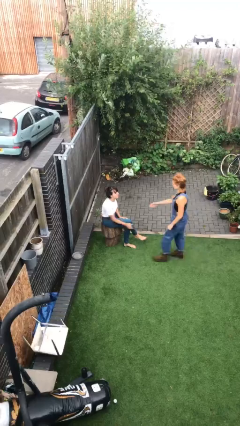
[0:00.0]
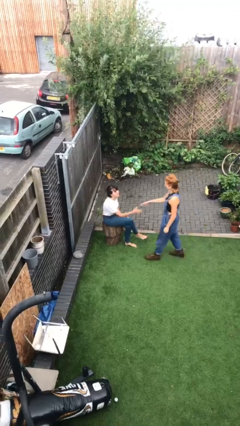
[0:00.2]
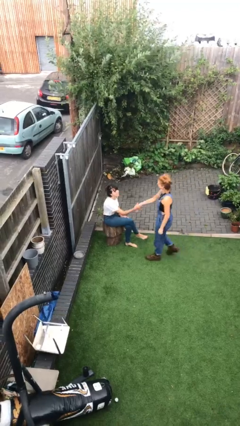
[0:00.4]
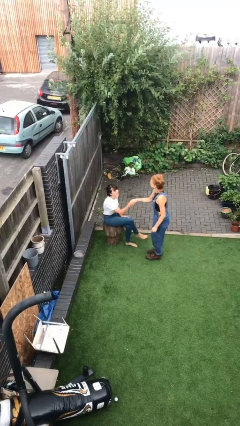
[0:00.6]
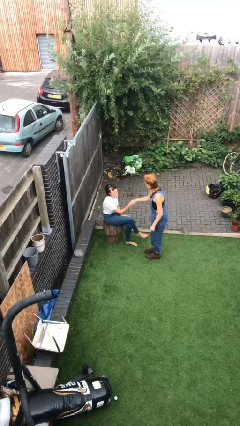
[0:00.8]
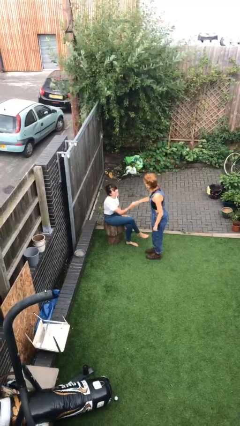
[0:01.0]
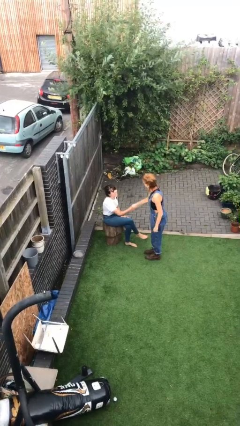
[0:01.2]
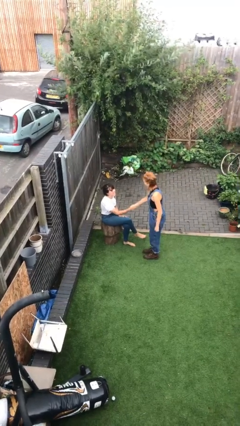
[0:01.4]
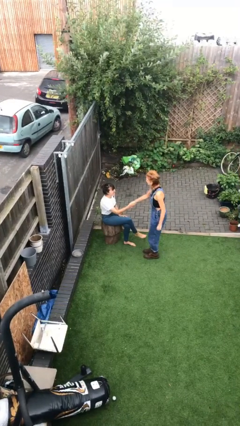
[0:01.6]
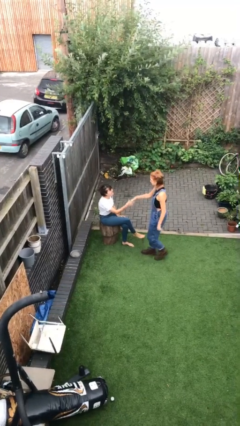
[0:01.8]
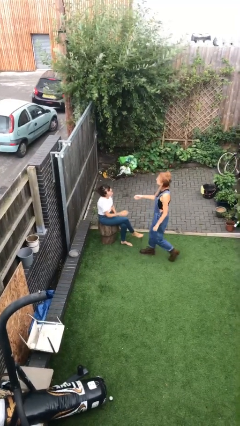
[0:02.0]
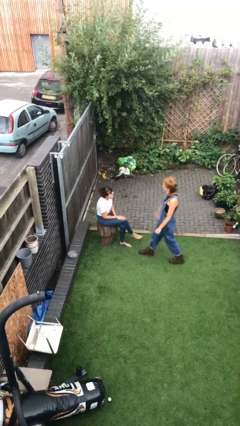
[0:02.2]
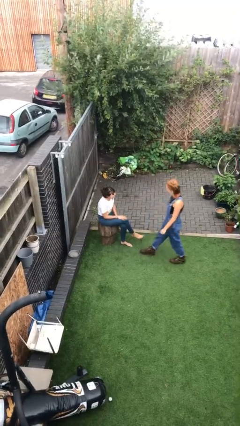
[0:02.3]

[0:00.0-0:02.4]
person shakes hand

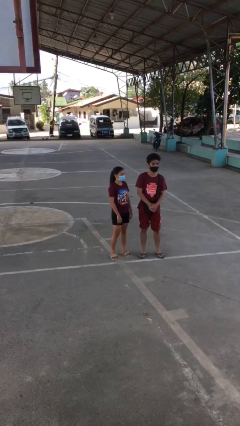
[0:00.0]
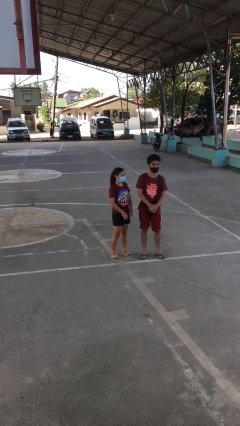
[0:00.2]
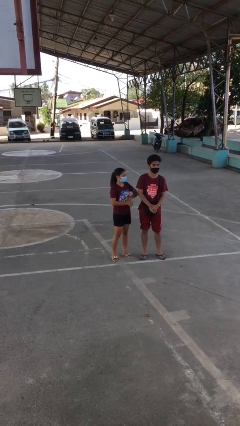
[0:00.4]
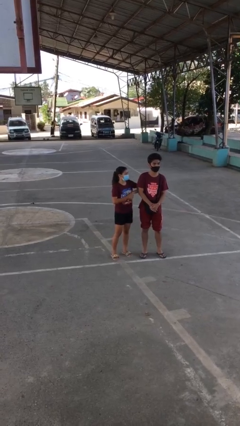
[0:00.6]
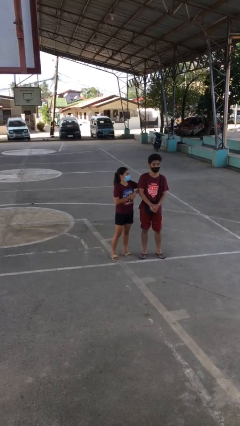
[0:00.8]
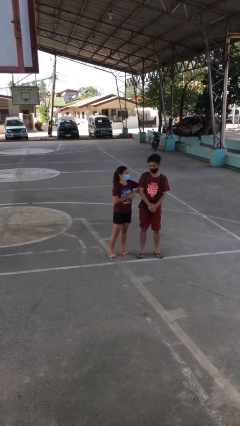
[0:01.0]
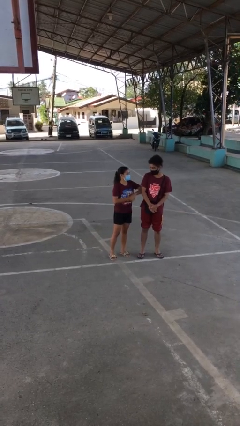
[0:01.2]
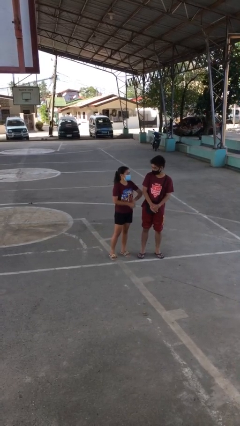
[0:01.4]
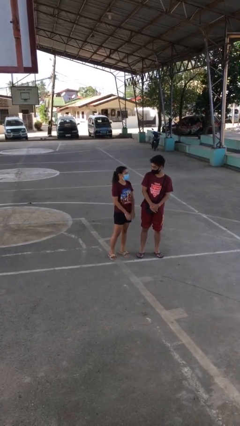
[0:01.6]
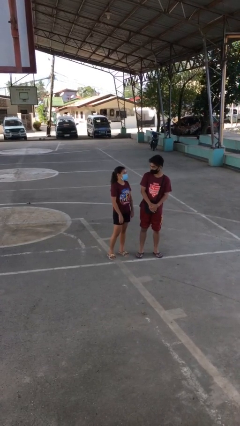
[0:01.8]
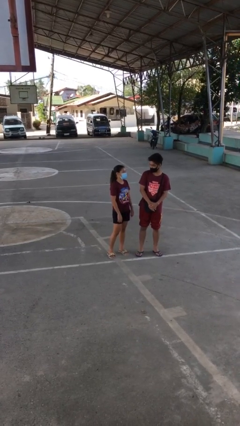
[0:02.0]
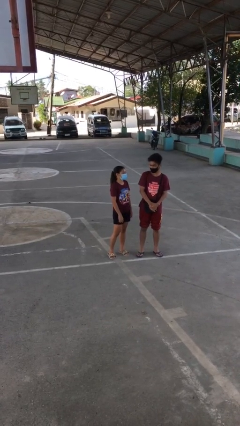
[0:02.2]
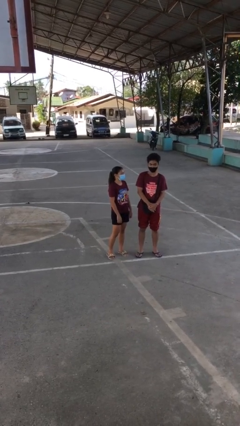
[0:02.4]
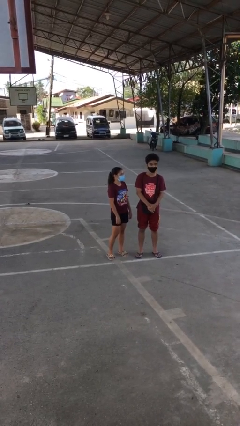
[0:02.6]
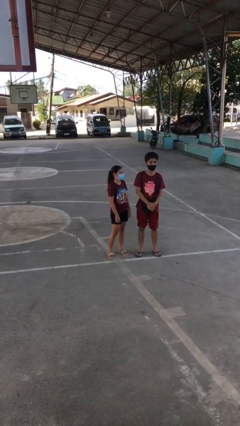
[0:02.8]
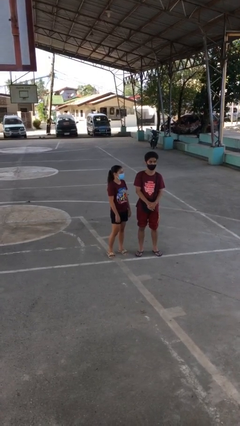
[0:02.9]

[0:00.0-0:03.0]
person nudges person with elbow

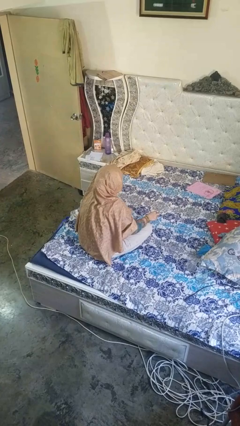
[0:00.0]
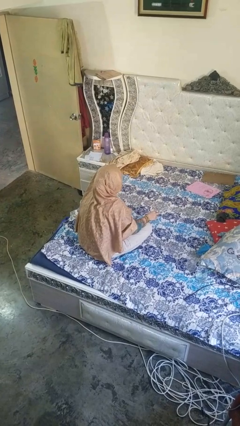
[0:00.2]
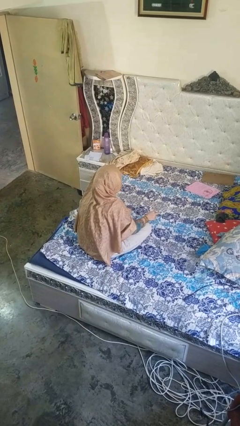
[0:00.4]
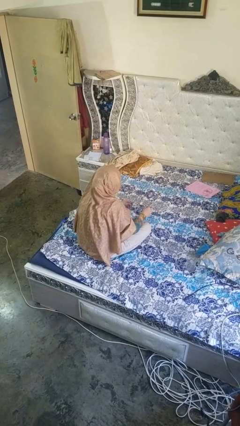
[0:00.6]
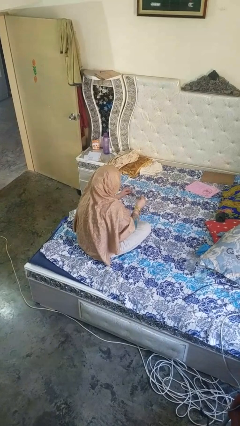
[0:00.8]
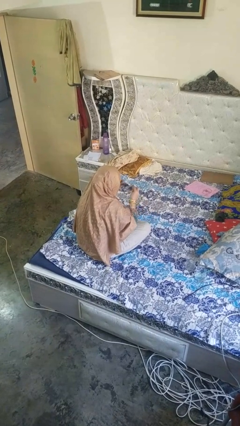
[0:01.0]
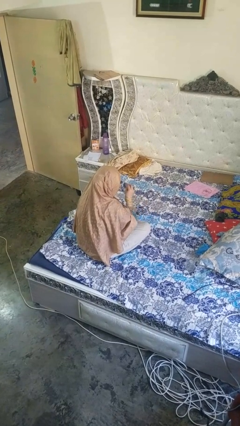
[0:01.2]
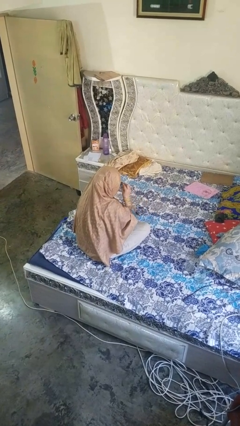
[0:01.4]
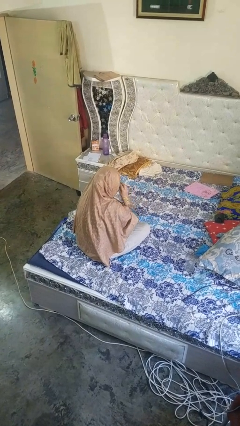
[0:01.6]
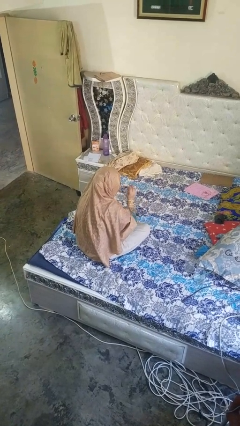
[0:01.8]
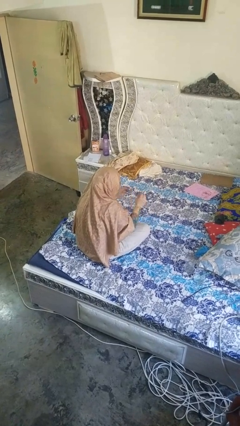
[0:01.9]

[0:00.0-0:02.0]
person puts on glasses

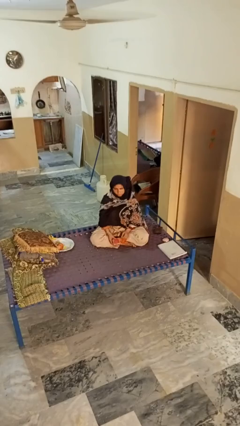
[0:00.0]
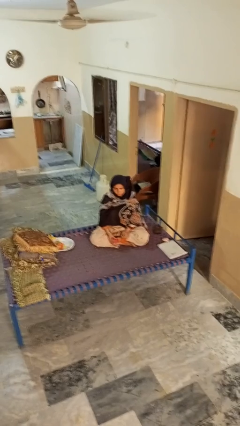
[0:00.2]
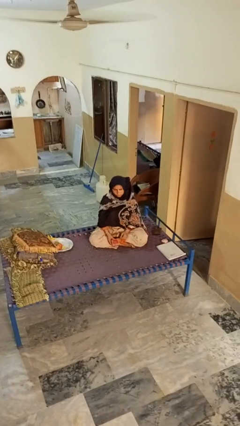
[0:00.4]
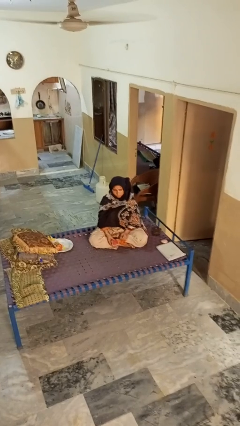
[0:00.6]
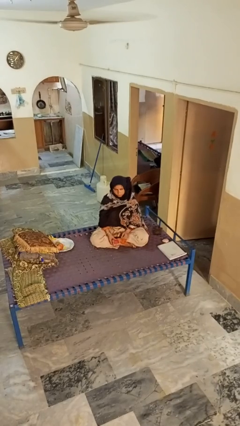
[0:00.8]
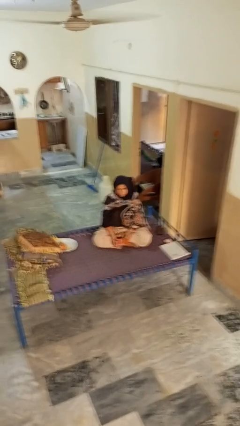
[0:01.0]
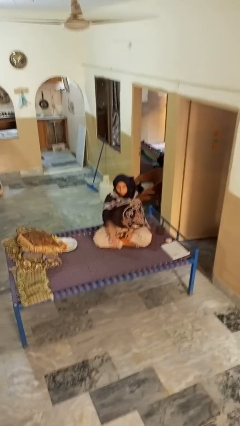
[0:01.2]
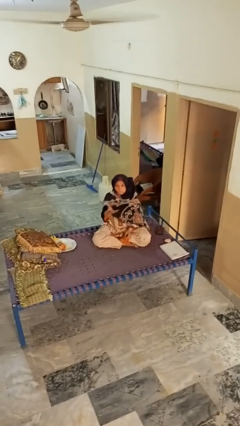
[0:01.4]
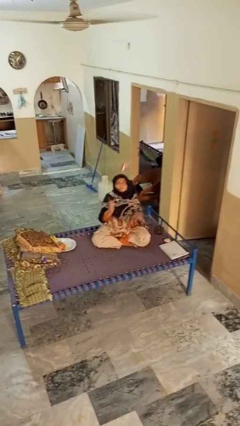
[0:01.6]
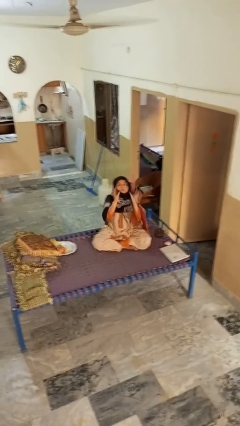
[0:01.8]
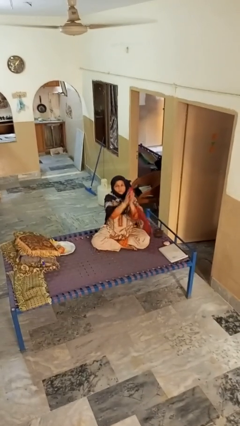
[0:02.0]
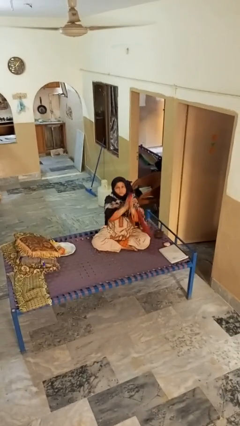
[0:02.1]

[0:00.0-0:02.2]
person drops object

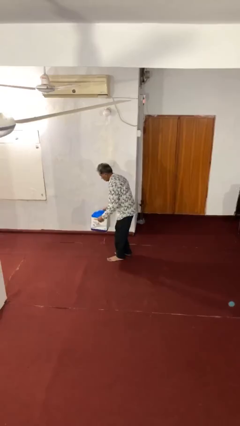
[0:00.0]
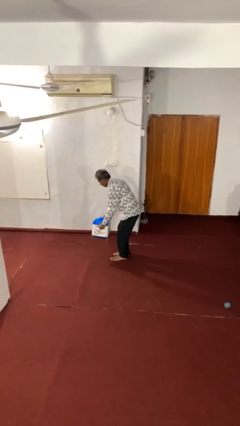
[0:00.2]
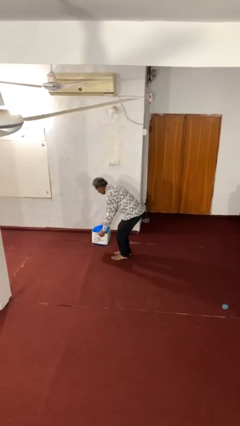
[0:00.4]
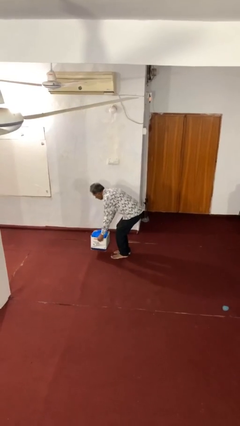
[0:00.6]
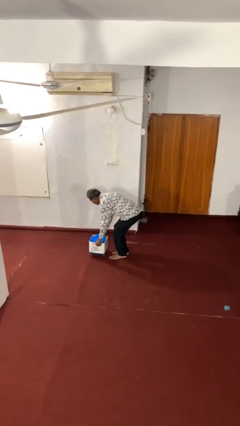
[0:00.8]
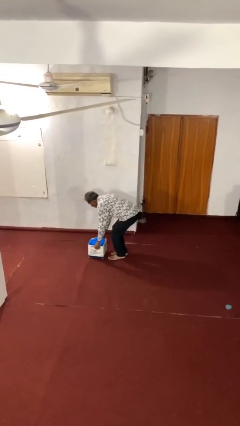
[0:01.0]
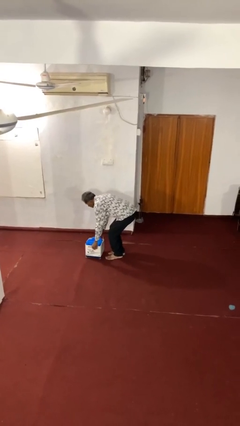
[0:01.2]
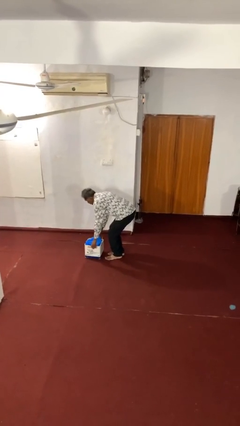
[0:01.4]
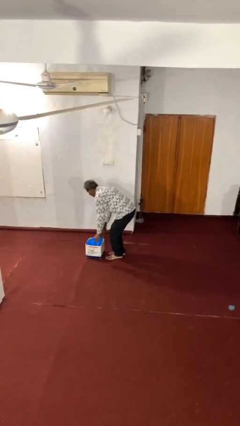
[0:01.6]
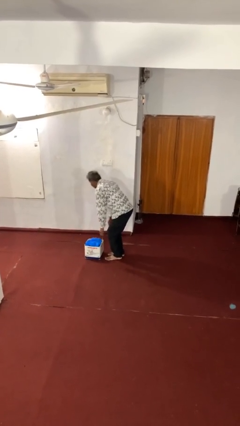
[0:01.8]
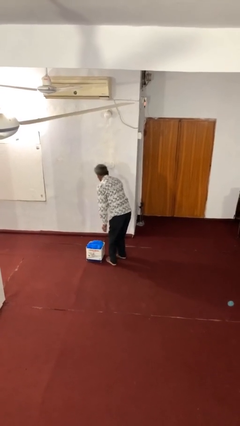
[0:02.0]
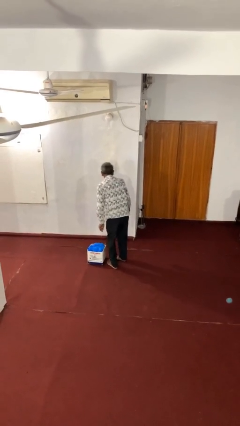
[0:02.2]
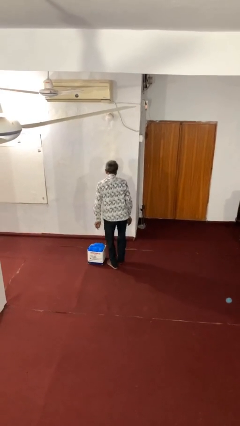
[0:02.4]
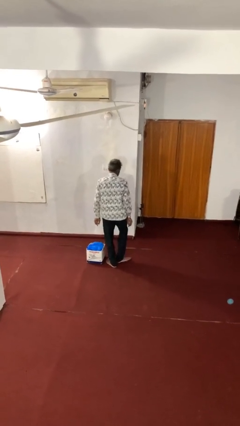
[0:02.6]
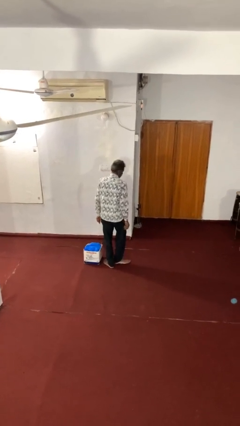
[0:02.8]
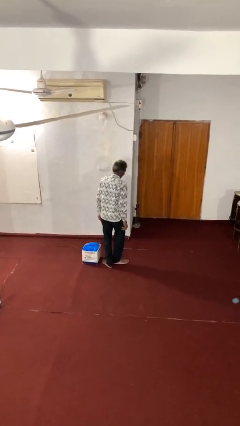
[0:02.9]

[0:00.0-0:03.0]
person puts down object on floor

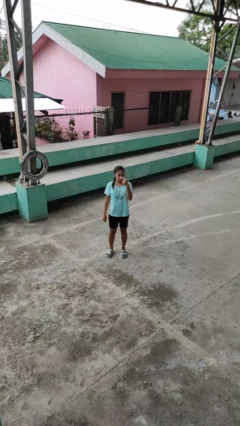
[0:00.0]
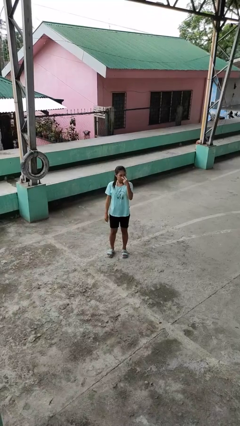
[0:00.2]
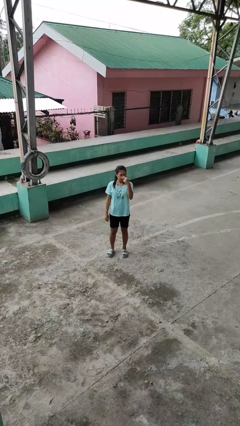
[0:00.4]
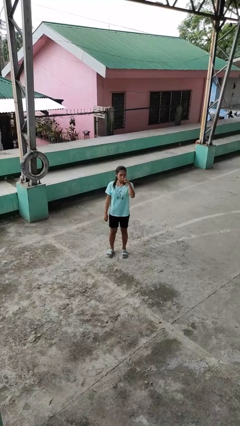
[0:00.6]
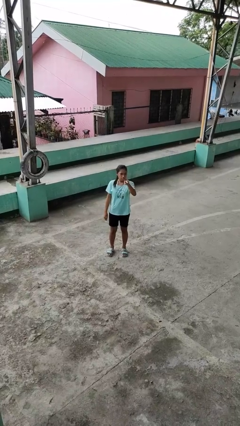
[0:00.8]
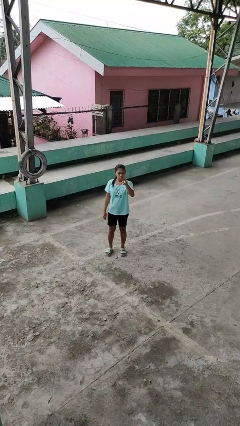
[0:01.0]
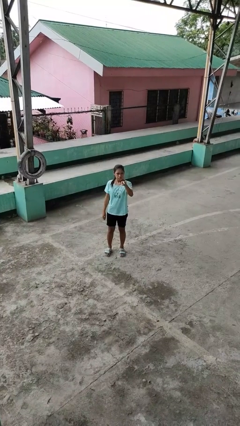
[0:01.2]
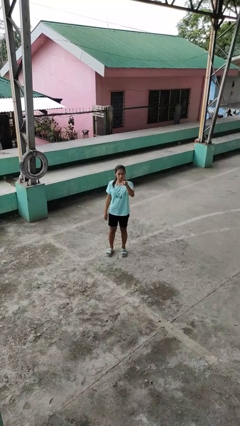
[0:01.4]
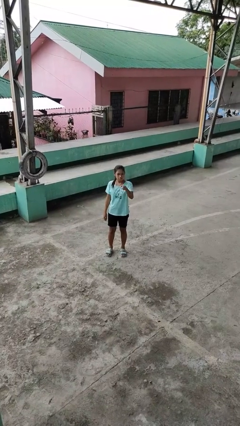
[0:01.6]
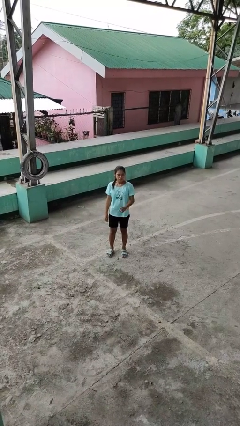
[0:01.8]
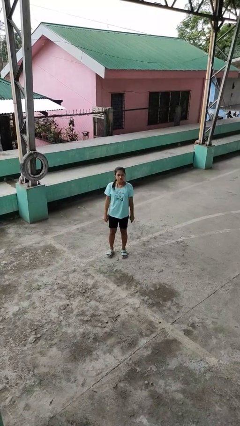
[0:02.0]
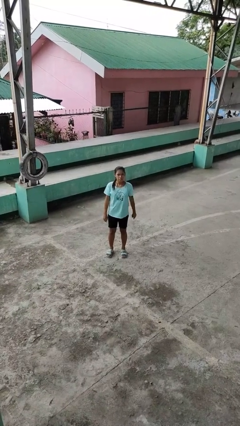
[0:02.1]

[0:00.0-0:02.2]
person gestures watch closely

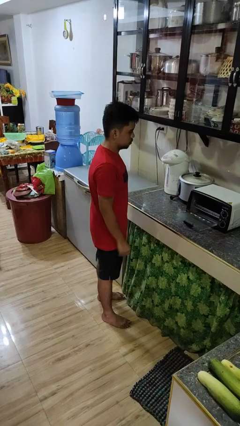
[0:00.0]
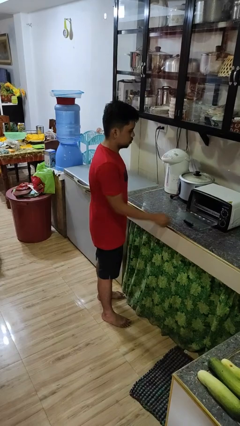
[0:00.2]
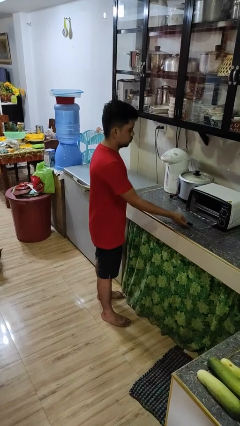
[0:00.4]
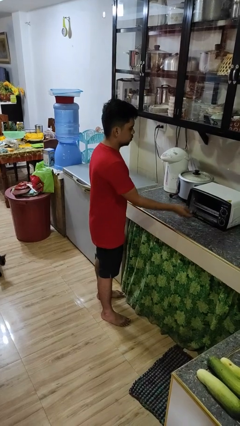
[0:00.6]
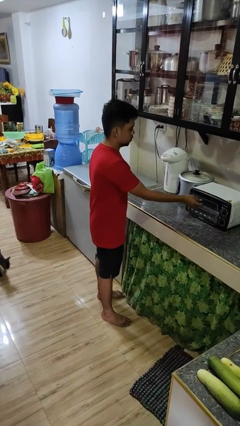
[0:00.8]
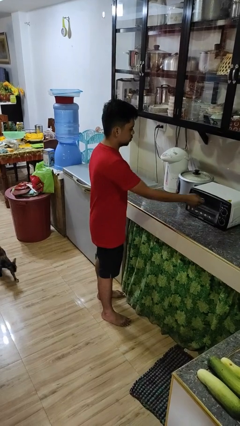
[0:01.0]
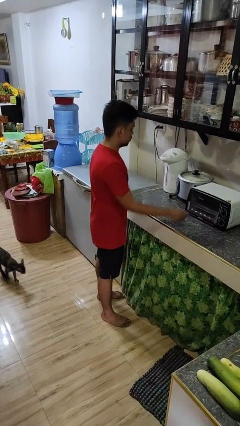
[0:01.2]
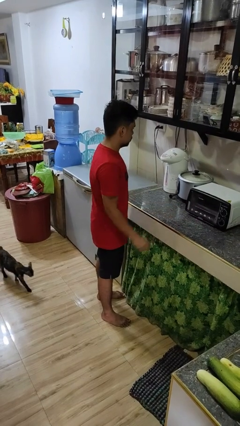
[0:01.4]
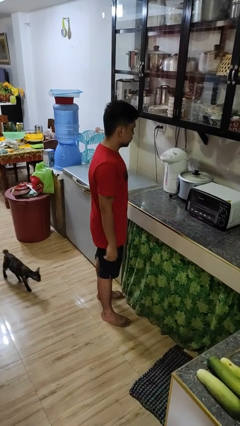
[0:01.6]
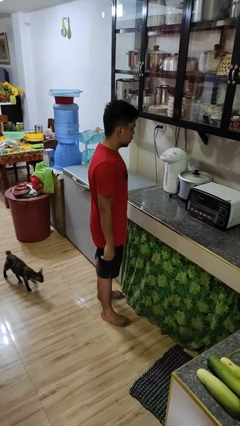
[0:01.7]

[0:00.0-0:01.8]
person closes microwave

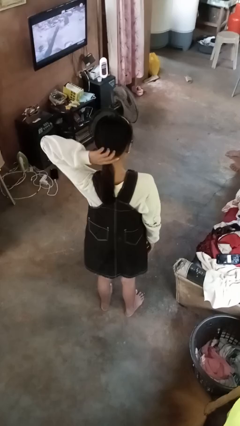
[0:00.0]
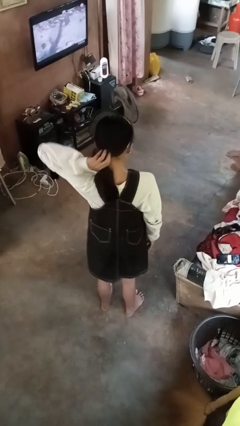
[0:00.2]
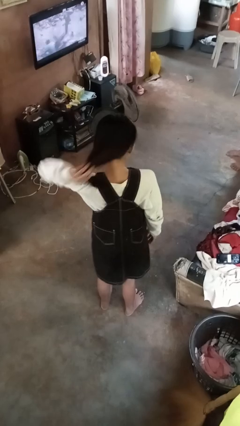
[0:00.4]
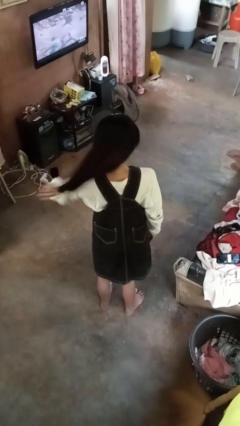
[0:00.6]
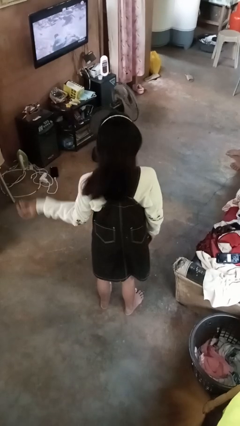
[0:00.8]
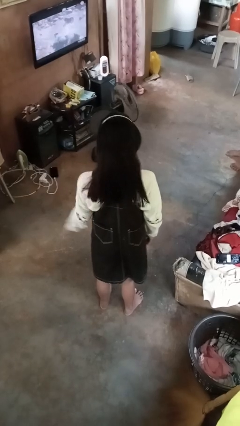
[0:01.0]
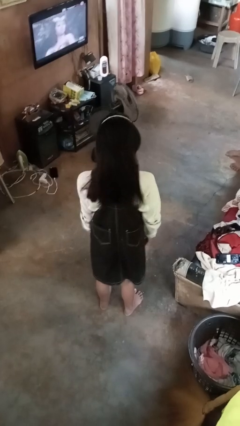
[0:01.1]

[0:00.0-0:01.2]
person takes off hairtie
